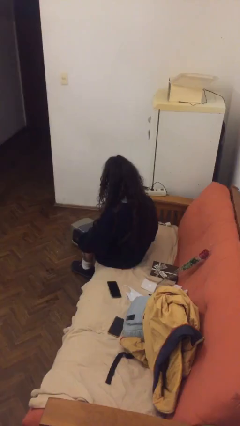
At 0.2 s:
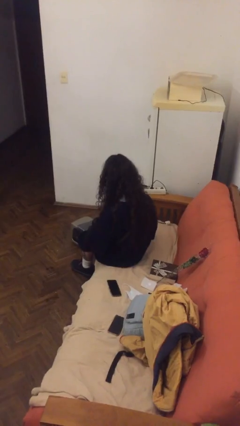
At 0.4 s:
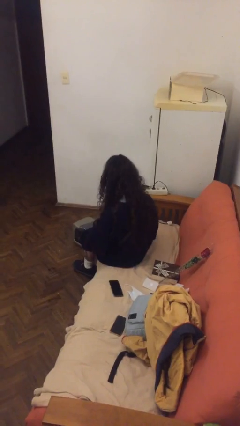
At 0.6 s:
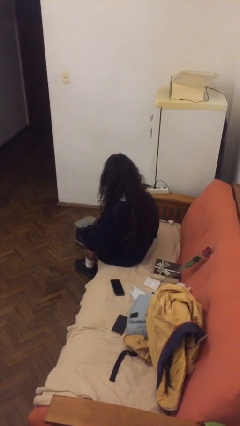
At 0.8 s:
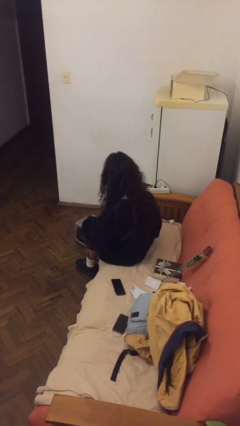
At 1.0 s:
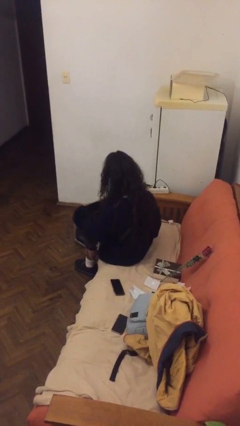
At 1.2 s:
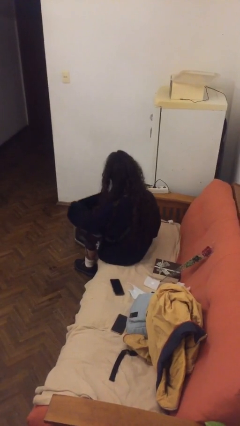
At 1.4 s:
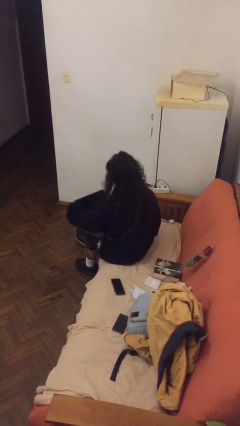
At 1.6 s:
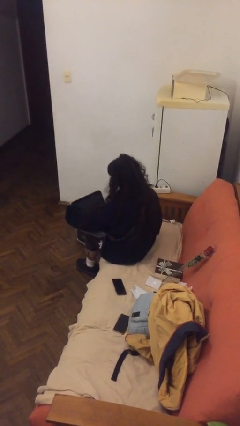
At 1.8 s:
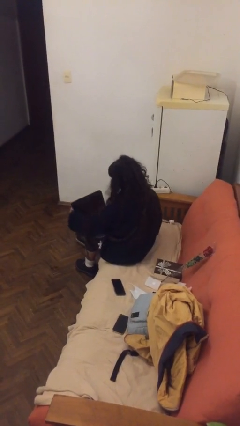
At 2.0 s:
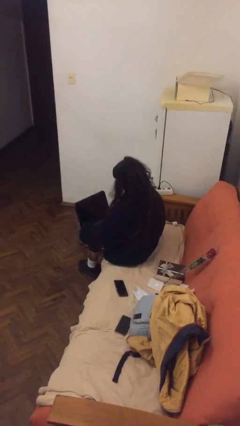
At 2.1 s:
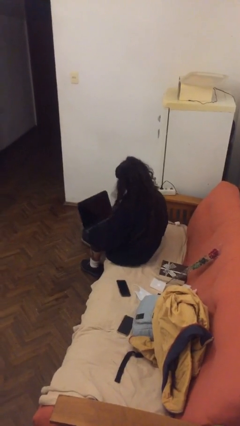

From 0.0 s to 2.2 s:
person opens laptop

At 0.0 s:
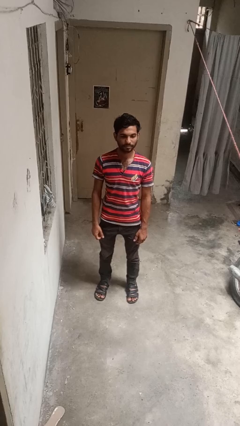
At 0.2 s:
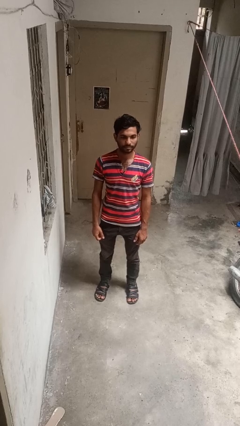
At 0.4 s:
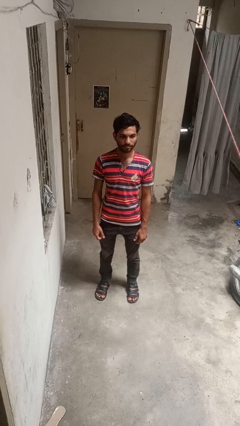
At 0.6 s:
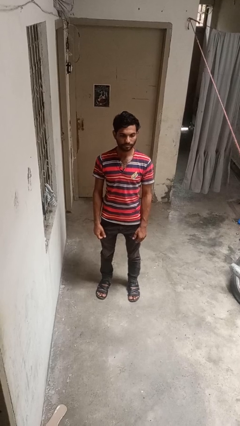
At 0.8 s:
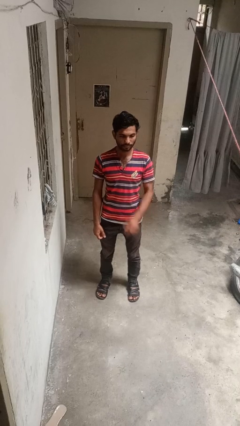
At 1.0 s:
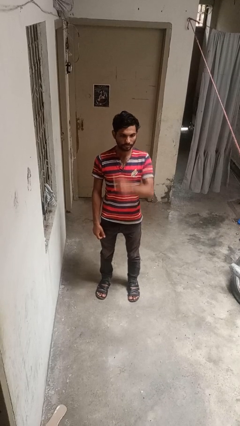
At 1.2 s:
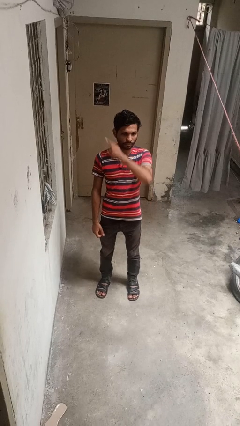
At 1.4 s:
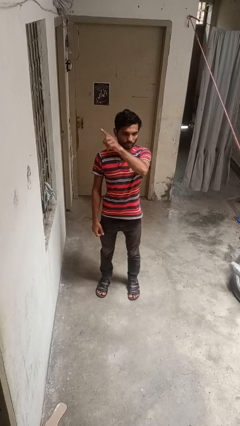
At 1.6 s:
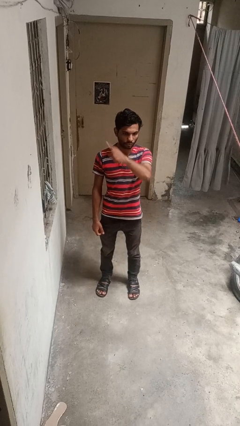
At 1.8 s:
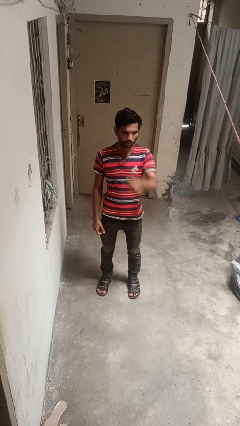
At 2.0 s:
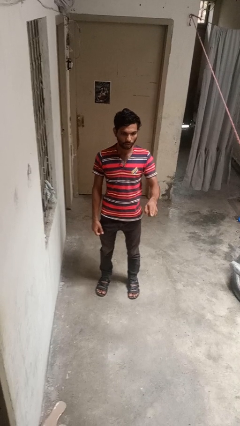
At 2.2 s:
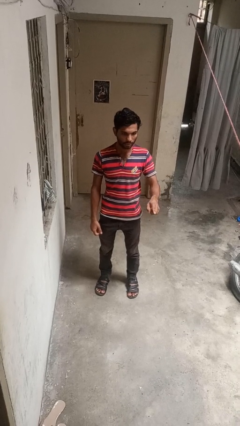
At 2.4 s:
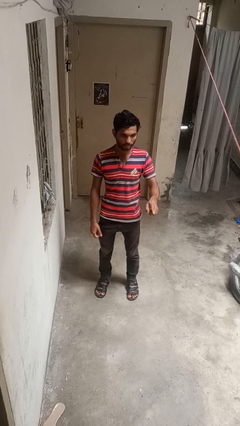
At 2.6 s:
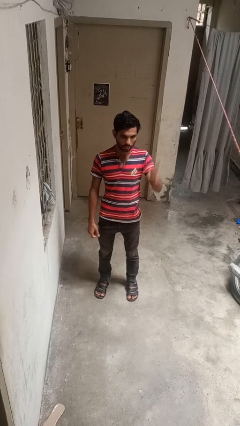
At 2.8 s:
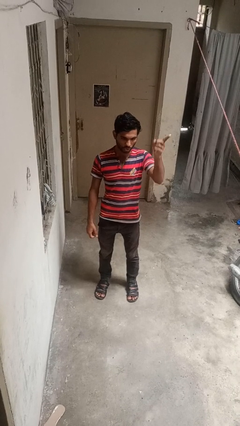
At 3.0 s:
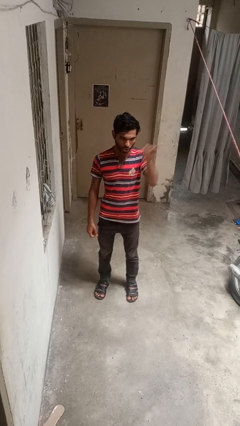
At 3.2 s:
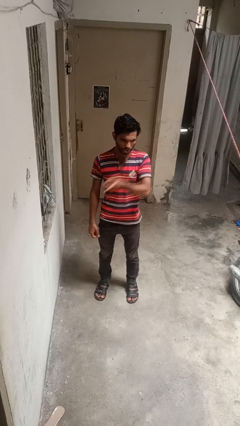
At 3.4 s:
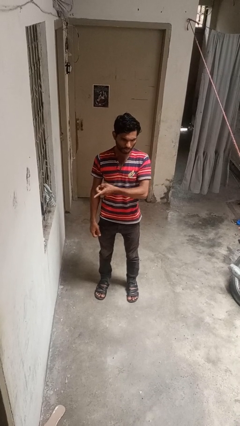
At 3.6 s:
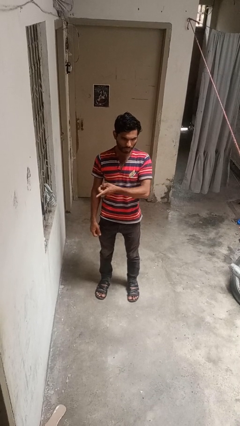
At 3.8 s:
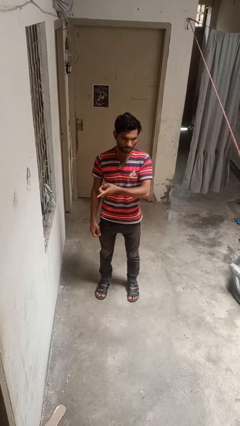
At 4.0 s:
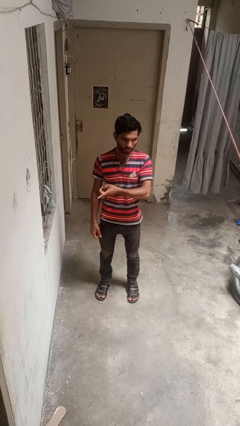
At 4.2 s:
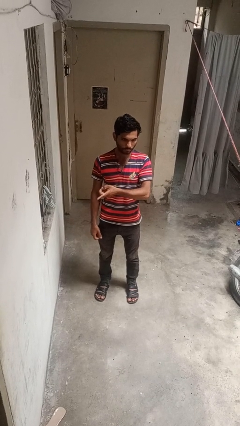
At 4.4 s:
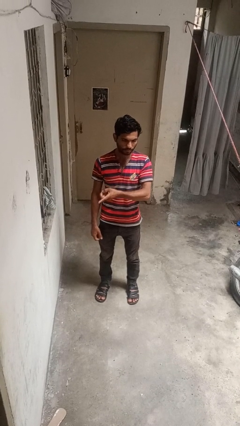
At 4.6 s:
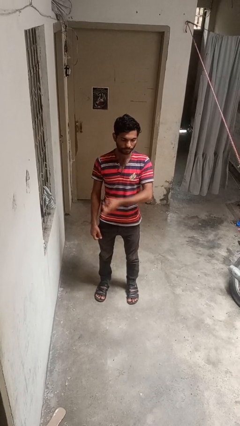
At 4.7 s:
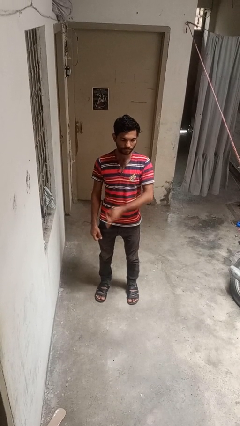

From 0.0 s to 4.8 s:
person gestures cut

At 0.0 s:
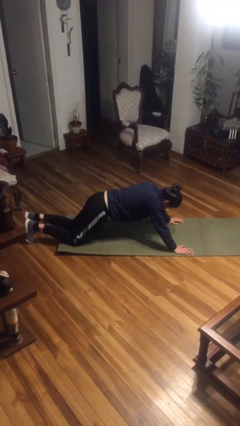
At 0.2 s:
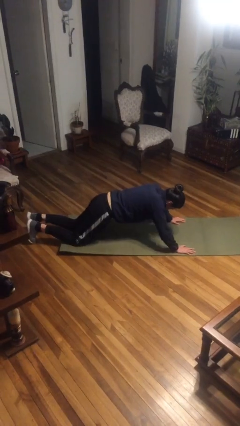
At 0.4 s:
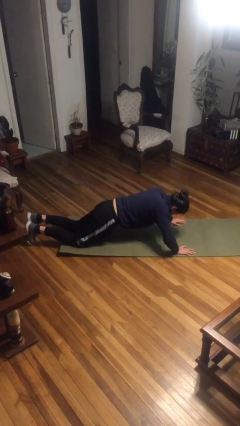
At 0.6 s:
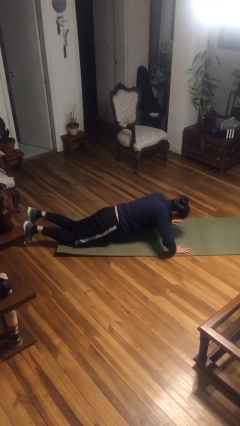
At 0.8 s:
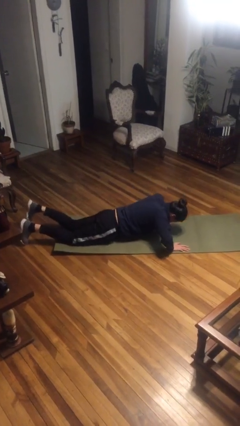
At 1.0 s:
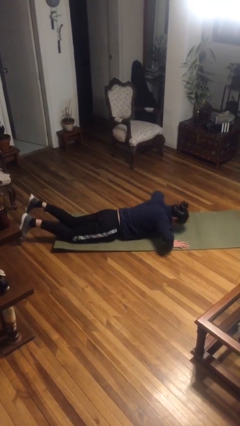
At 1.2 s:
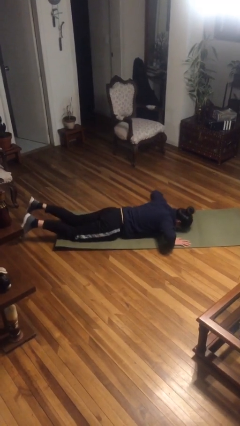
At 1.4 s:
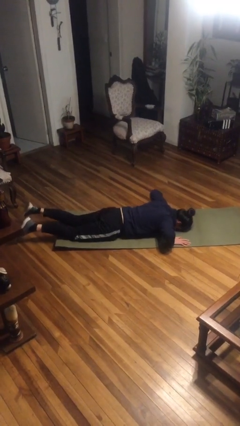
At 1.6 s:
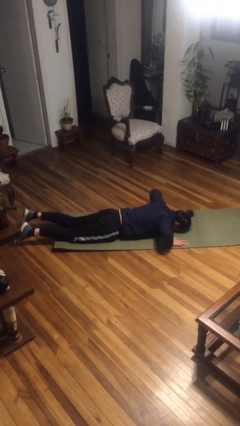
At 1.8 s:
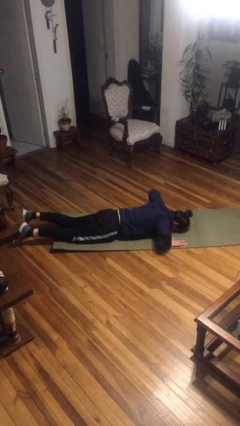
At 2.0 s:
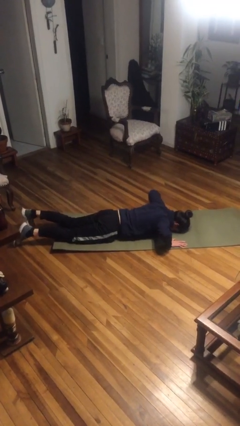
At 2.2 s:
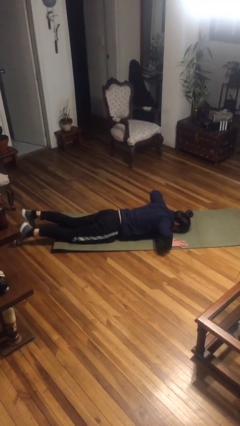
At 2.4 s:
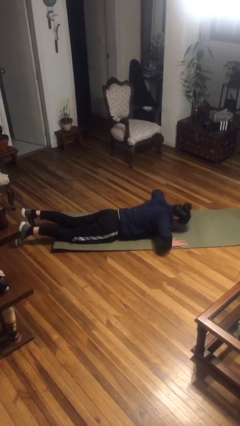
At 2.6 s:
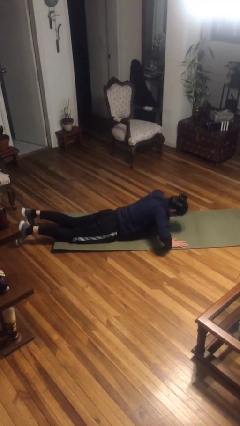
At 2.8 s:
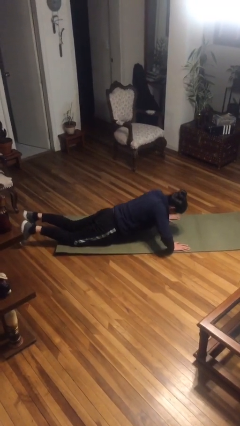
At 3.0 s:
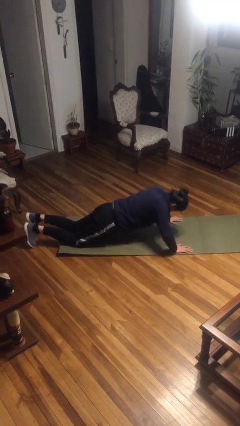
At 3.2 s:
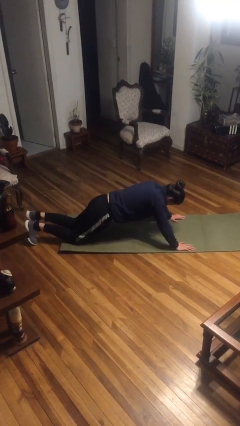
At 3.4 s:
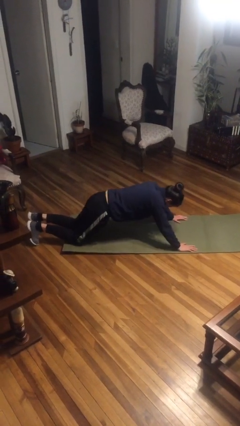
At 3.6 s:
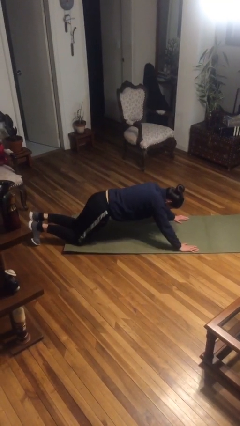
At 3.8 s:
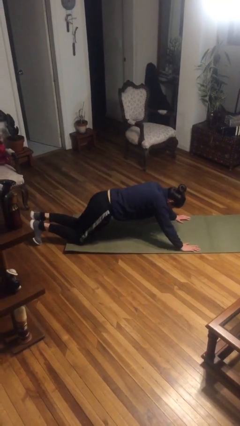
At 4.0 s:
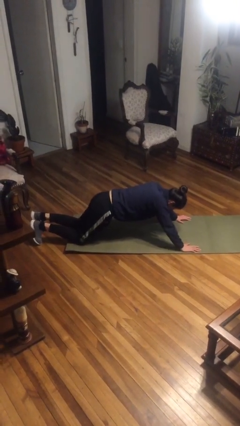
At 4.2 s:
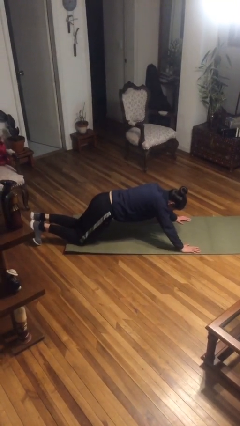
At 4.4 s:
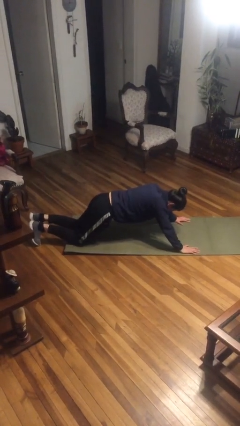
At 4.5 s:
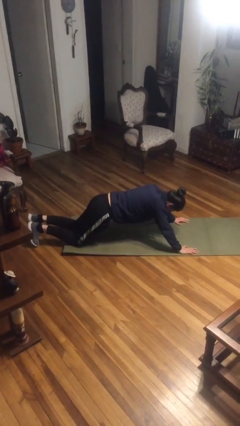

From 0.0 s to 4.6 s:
person exercises with pushup

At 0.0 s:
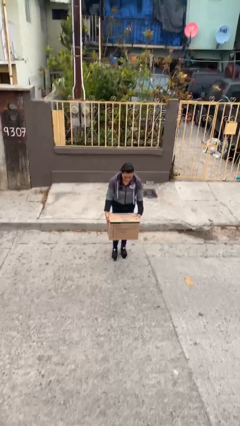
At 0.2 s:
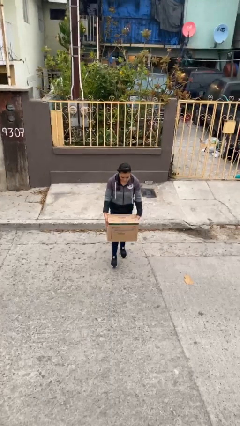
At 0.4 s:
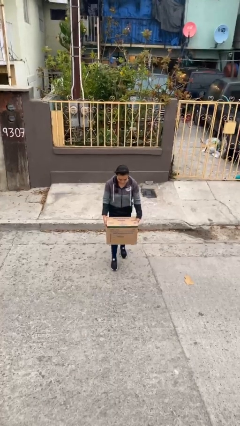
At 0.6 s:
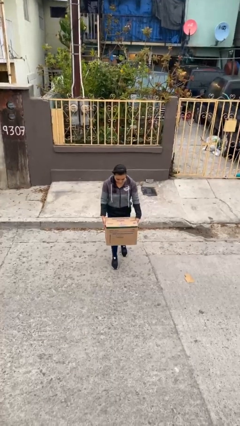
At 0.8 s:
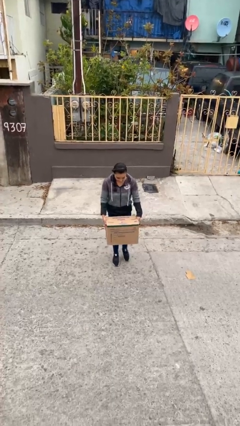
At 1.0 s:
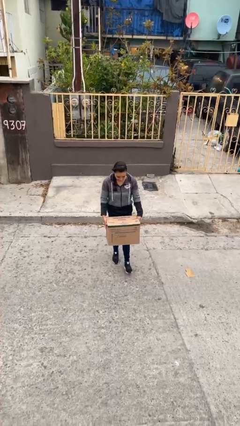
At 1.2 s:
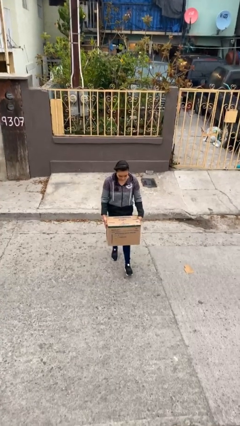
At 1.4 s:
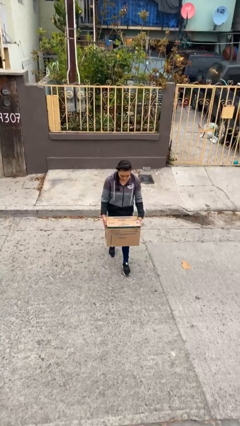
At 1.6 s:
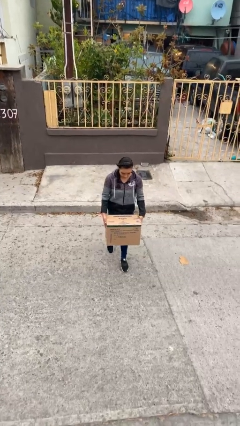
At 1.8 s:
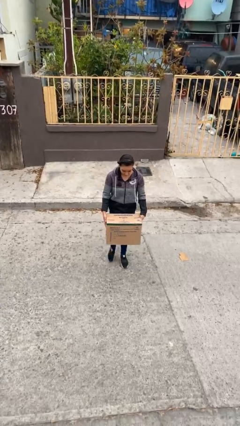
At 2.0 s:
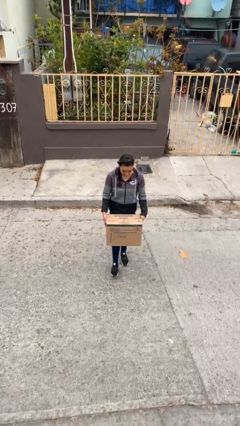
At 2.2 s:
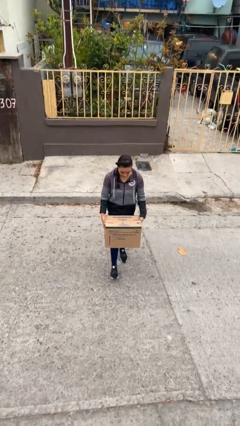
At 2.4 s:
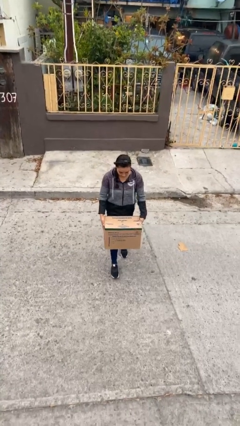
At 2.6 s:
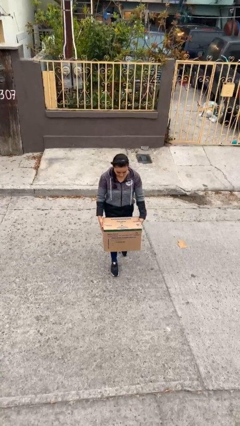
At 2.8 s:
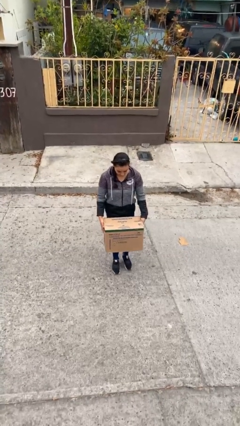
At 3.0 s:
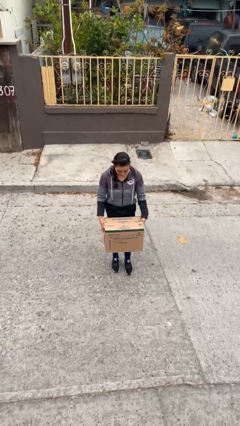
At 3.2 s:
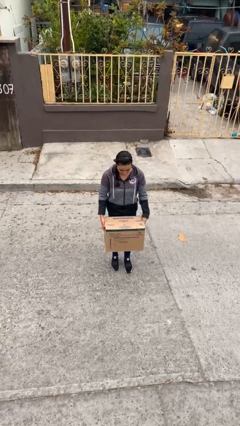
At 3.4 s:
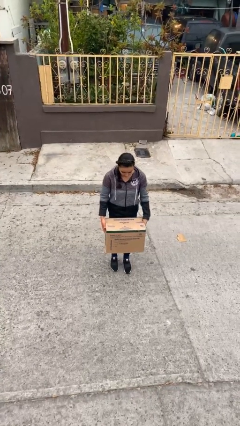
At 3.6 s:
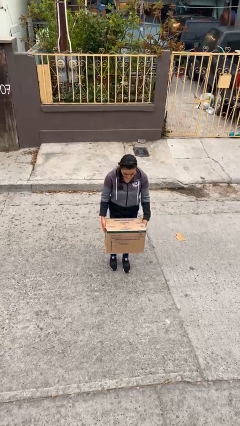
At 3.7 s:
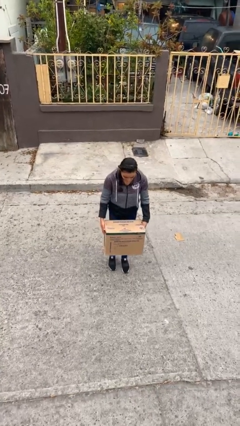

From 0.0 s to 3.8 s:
person carries heavy object

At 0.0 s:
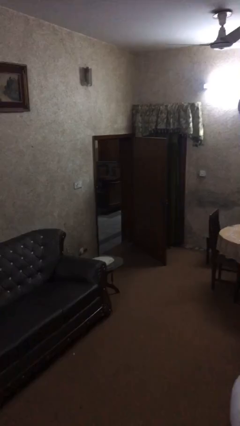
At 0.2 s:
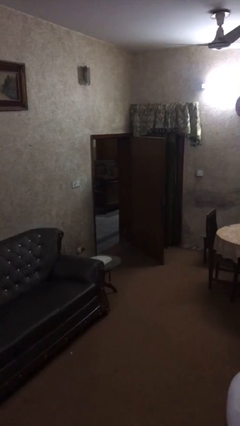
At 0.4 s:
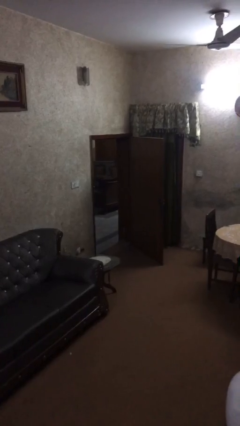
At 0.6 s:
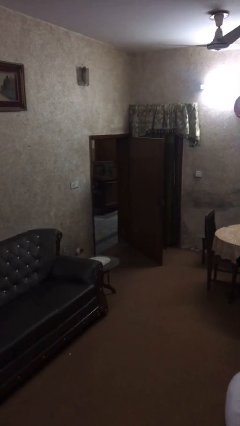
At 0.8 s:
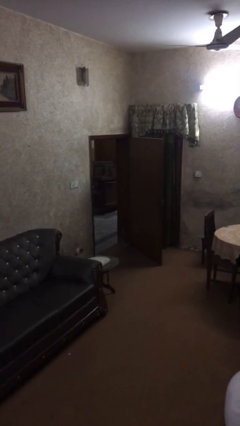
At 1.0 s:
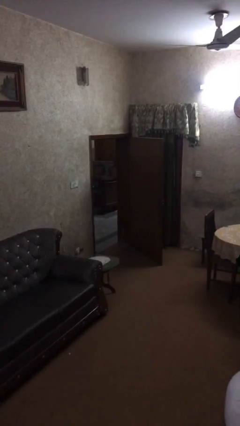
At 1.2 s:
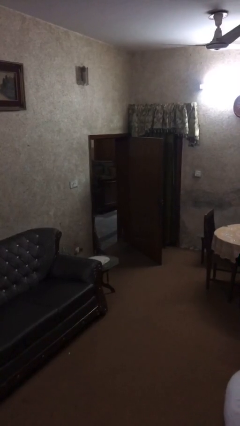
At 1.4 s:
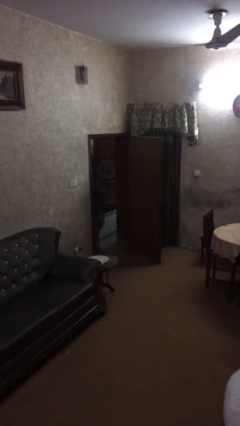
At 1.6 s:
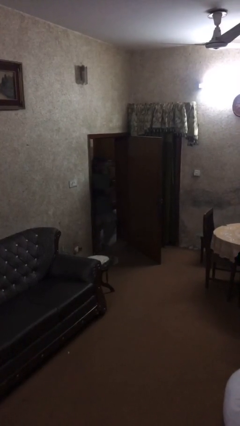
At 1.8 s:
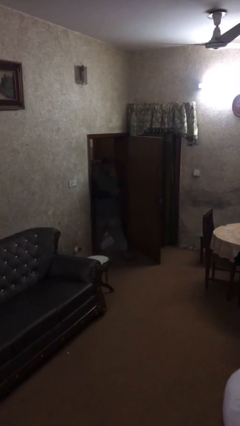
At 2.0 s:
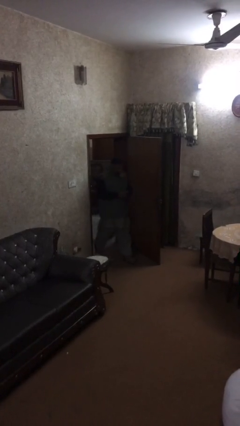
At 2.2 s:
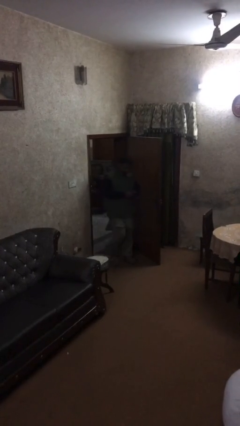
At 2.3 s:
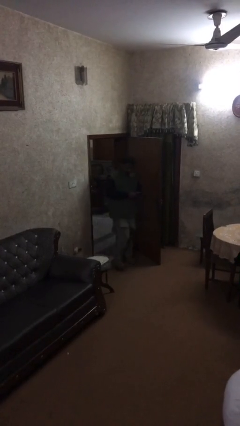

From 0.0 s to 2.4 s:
person enters scene through structure
